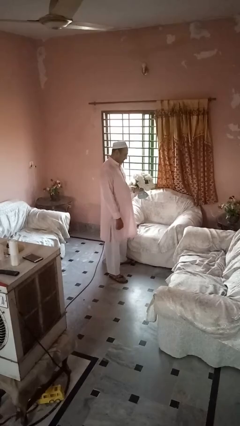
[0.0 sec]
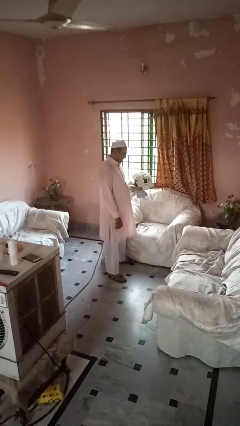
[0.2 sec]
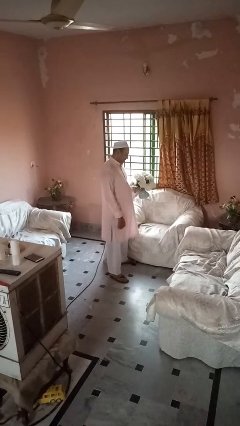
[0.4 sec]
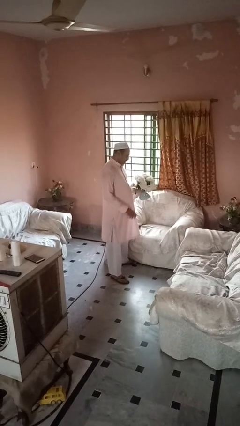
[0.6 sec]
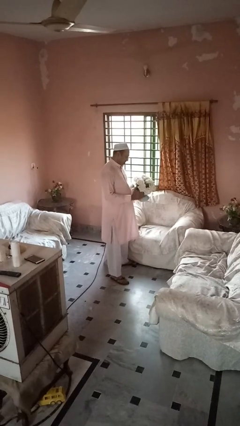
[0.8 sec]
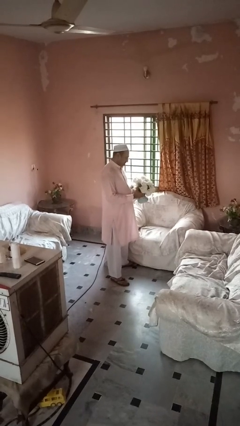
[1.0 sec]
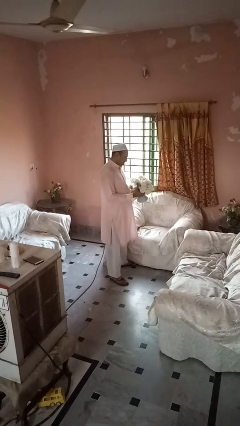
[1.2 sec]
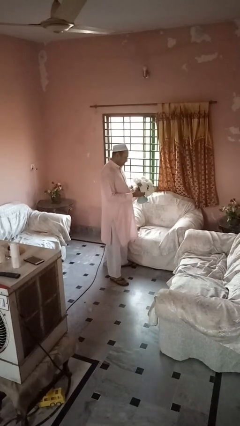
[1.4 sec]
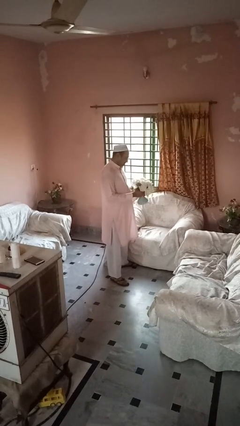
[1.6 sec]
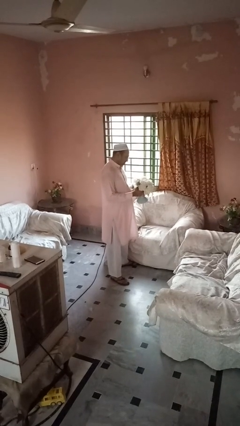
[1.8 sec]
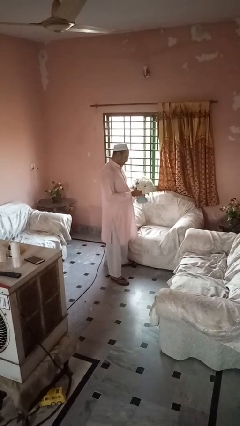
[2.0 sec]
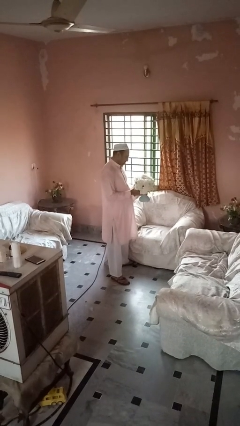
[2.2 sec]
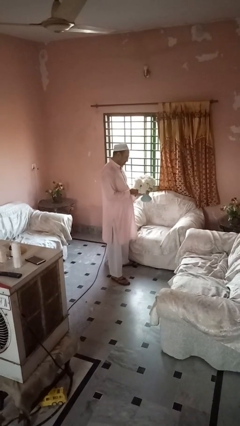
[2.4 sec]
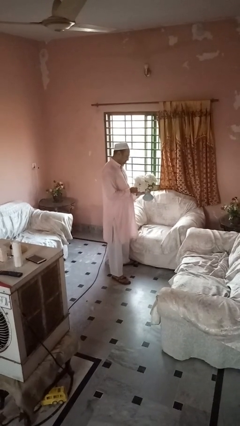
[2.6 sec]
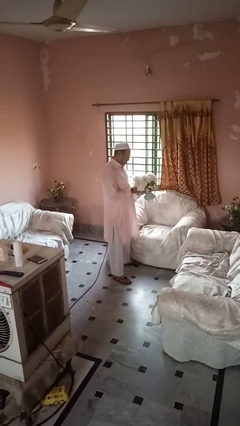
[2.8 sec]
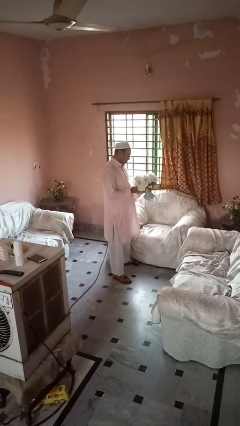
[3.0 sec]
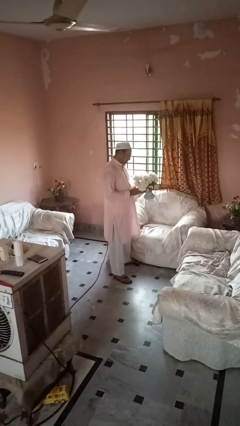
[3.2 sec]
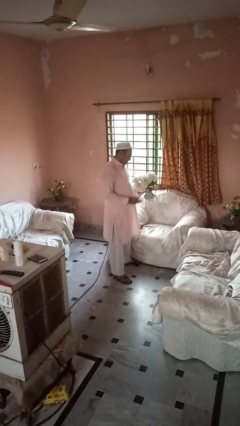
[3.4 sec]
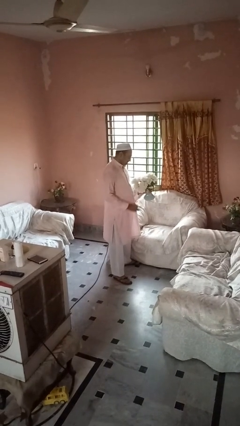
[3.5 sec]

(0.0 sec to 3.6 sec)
person arranges flowers in vase

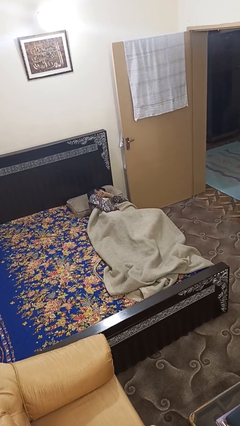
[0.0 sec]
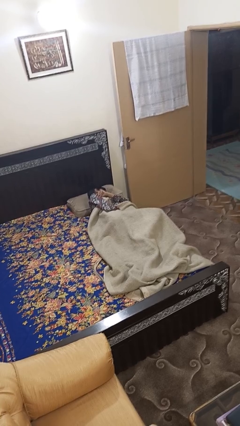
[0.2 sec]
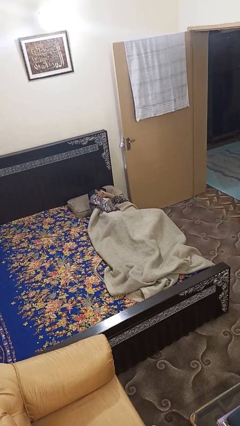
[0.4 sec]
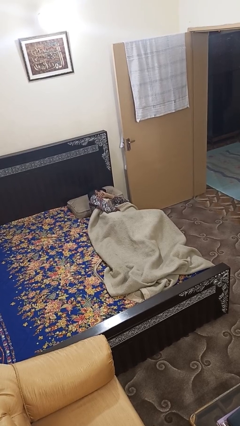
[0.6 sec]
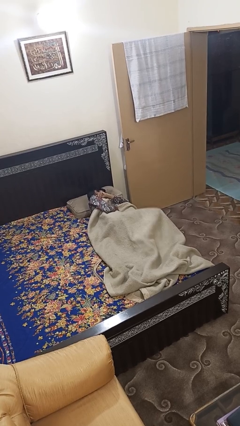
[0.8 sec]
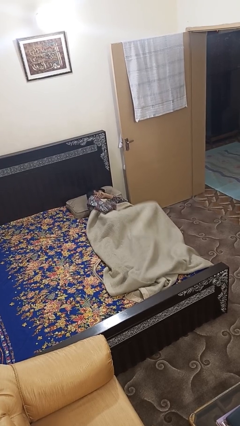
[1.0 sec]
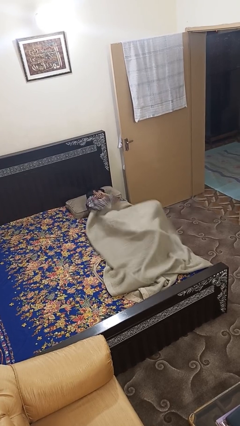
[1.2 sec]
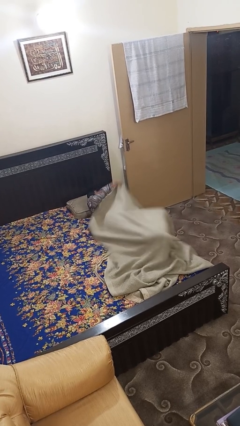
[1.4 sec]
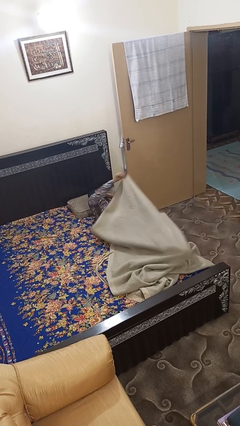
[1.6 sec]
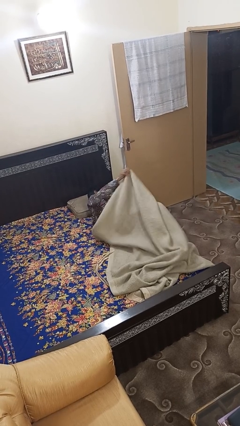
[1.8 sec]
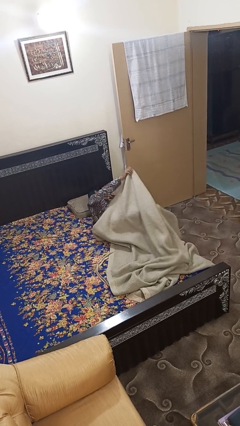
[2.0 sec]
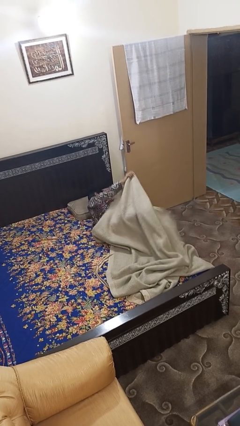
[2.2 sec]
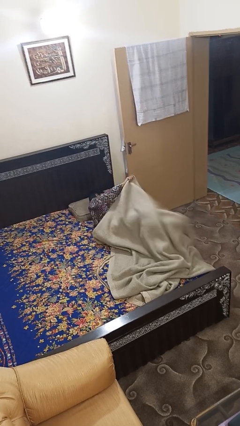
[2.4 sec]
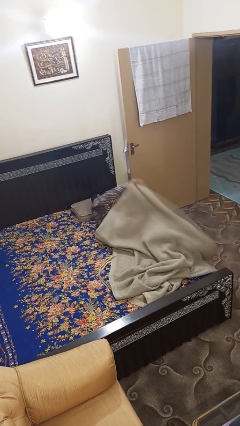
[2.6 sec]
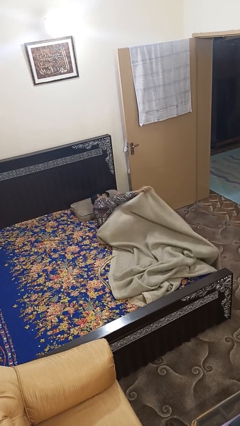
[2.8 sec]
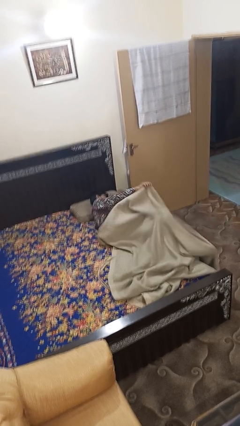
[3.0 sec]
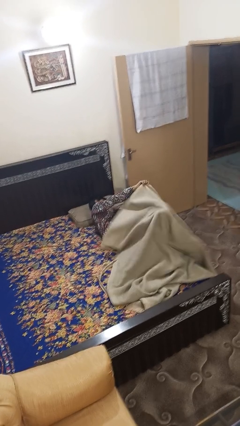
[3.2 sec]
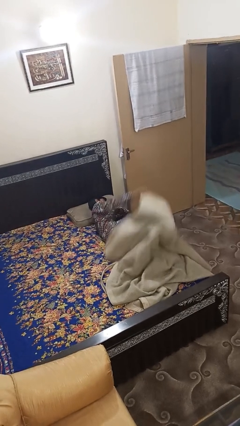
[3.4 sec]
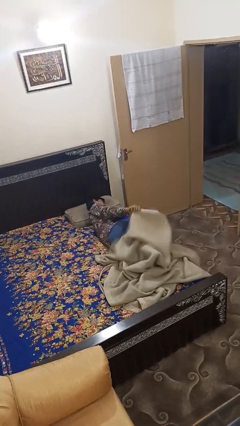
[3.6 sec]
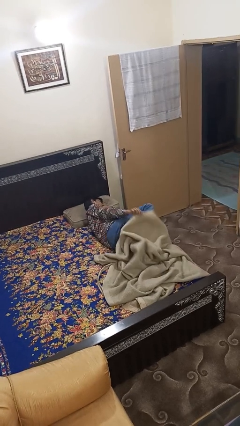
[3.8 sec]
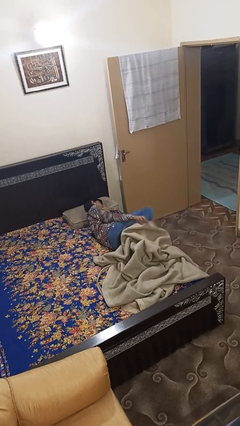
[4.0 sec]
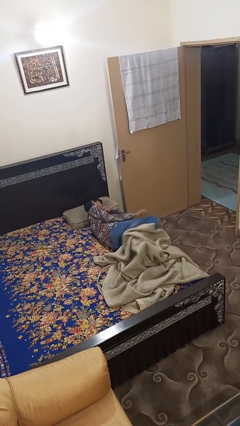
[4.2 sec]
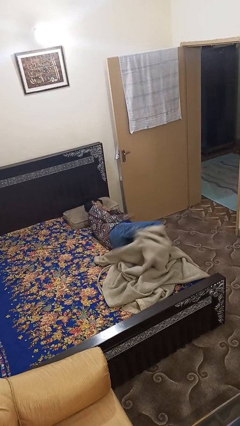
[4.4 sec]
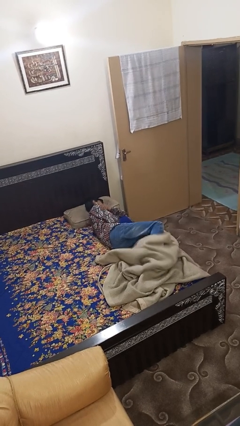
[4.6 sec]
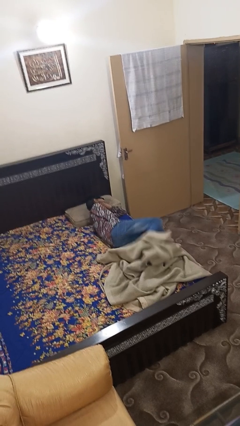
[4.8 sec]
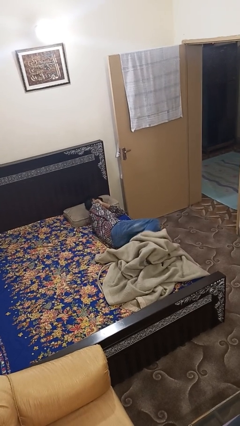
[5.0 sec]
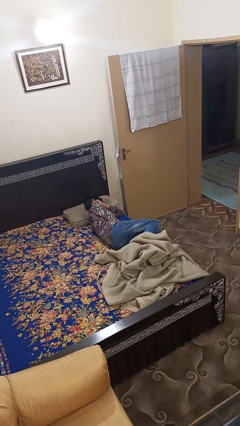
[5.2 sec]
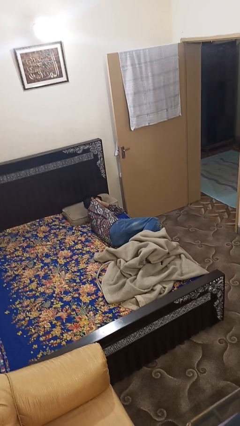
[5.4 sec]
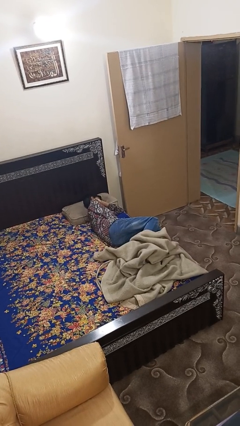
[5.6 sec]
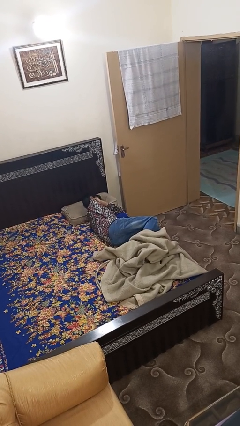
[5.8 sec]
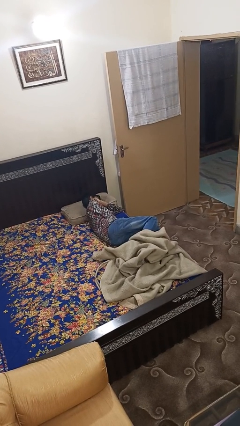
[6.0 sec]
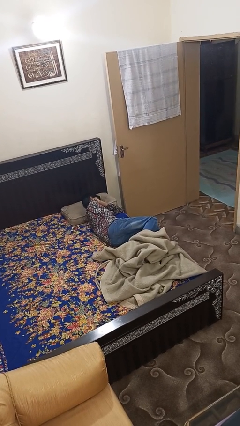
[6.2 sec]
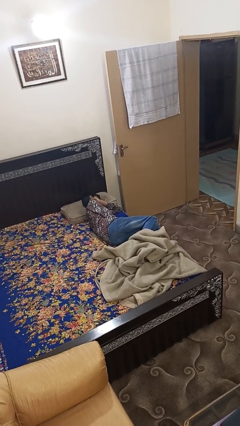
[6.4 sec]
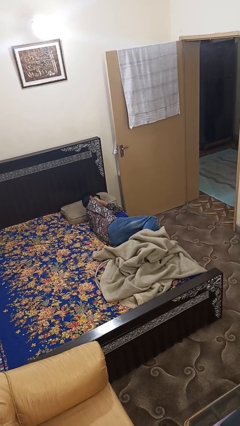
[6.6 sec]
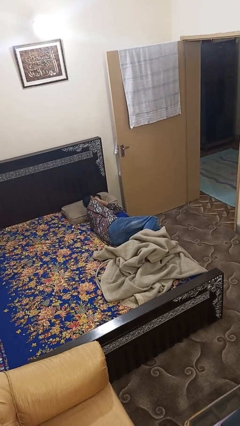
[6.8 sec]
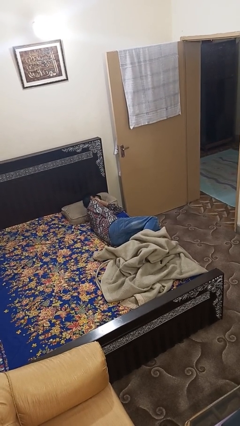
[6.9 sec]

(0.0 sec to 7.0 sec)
person uncovers with bedsheets

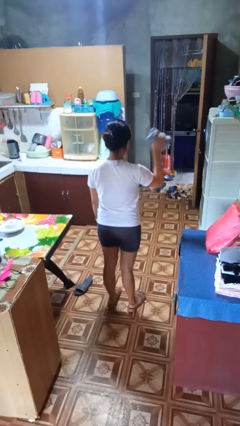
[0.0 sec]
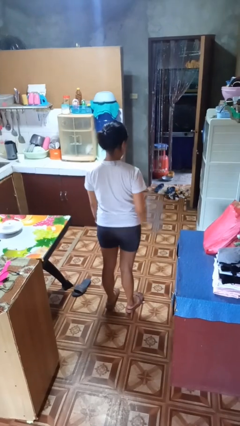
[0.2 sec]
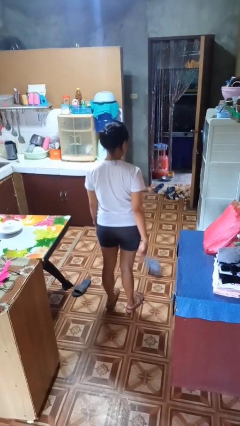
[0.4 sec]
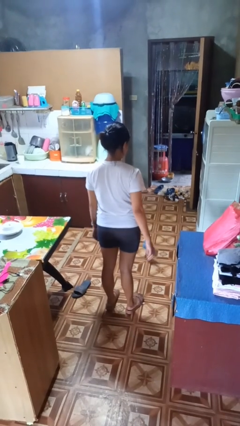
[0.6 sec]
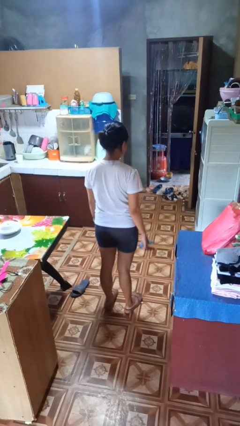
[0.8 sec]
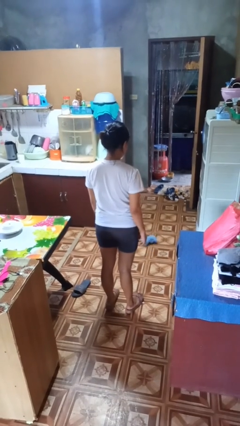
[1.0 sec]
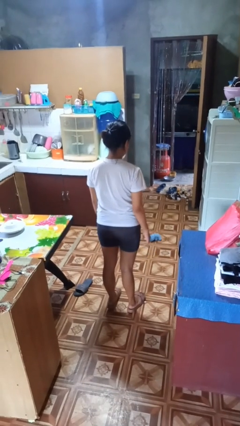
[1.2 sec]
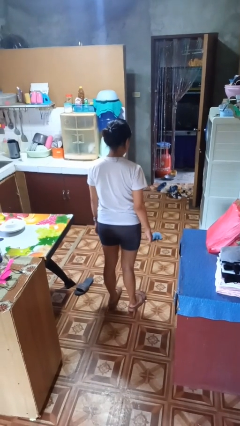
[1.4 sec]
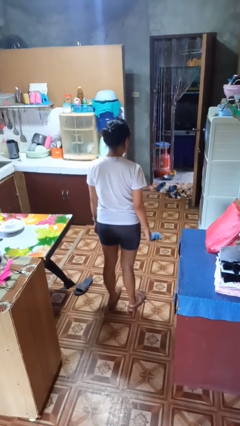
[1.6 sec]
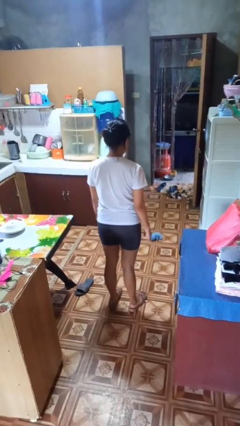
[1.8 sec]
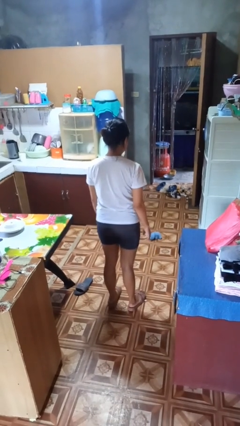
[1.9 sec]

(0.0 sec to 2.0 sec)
person throws object to ground

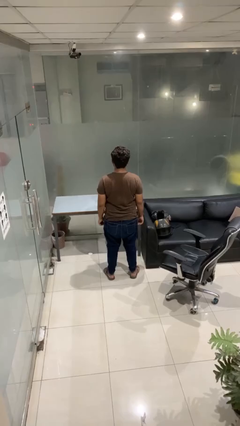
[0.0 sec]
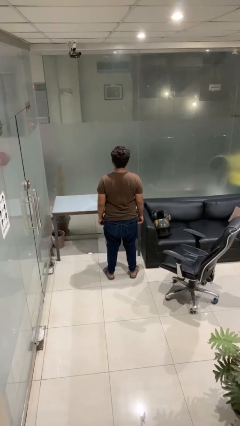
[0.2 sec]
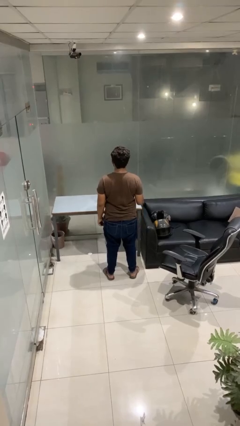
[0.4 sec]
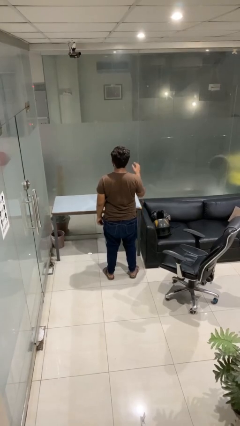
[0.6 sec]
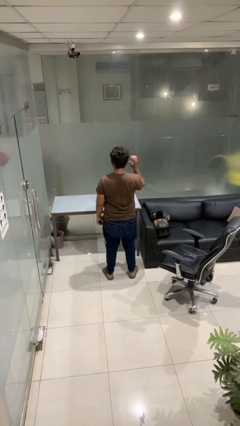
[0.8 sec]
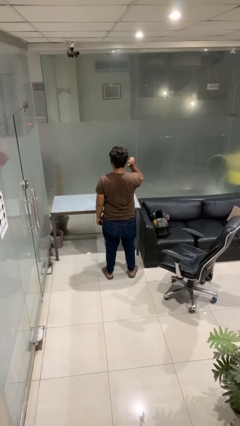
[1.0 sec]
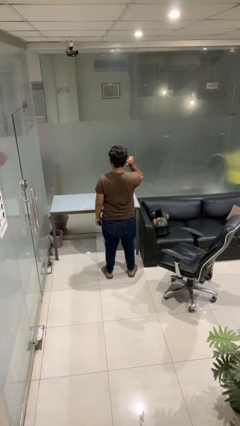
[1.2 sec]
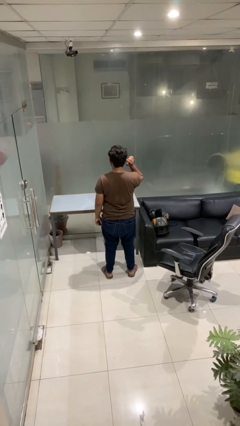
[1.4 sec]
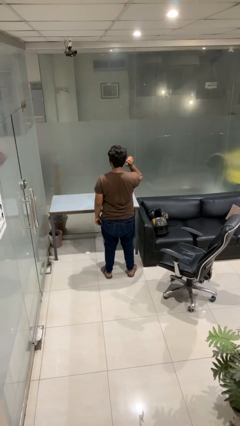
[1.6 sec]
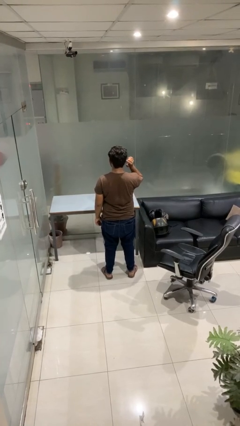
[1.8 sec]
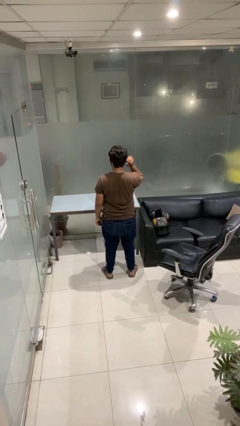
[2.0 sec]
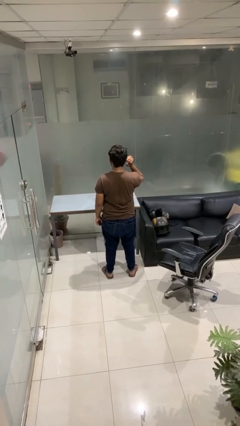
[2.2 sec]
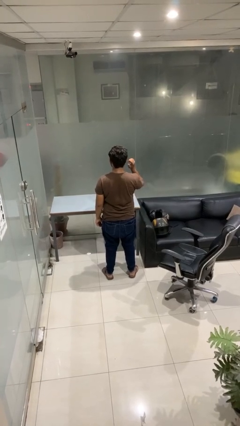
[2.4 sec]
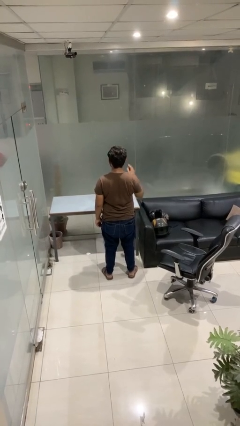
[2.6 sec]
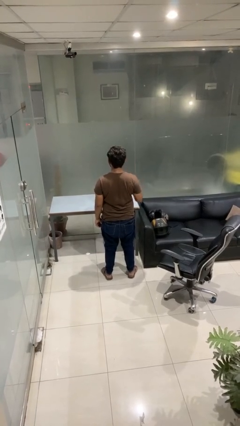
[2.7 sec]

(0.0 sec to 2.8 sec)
person gestures listen closely

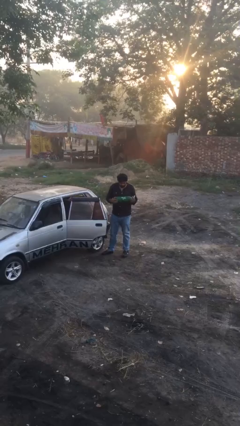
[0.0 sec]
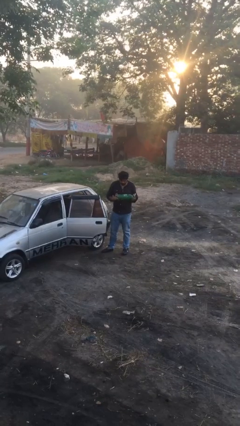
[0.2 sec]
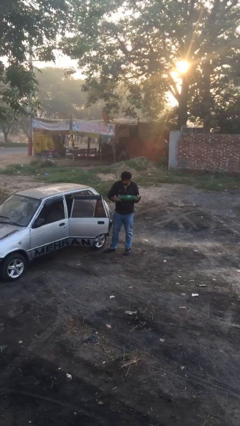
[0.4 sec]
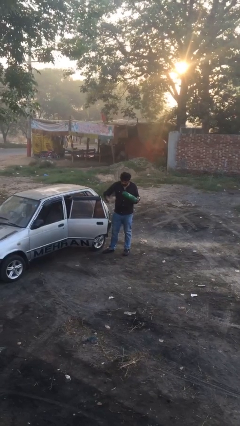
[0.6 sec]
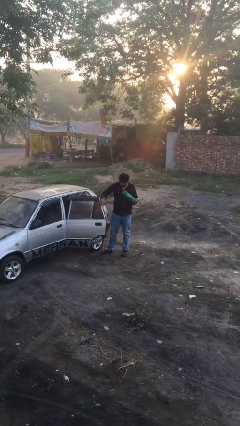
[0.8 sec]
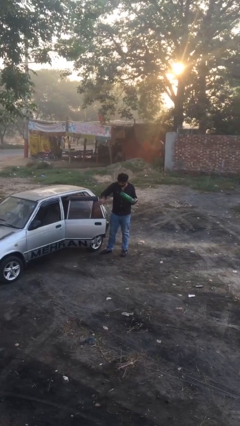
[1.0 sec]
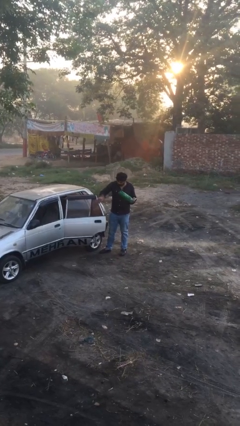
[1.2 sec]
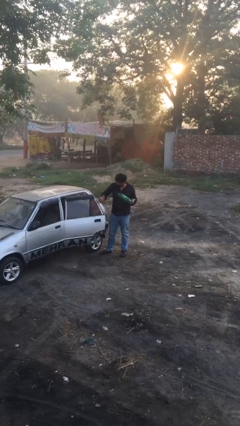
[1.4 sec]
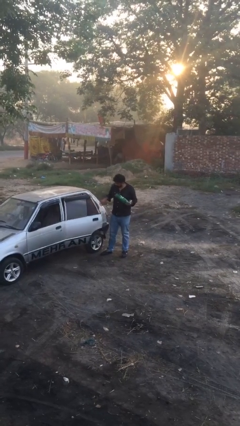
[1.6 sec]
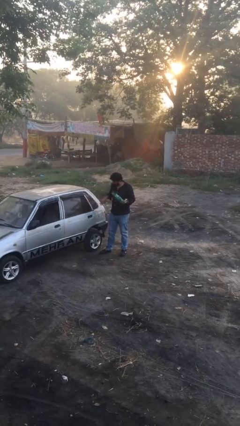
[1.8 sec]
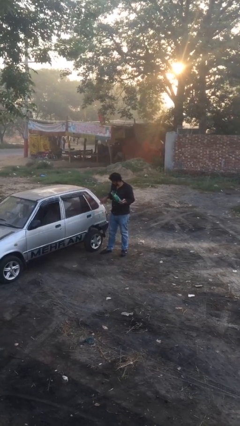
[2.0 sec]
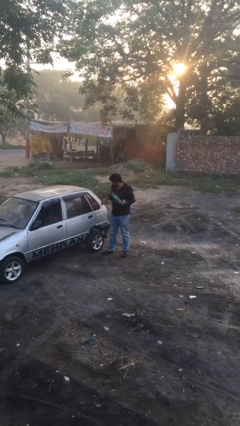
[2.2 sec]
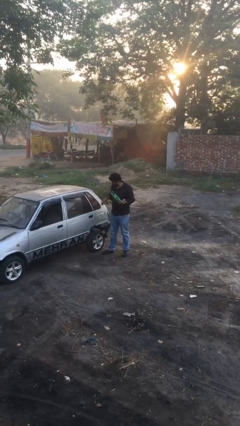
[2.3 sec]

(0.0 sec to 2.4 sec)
person closes car door
